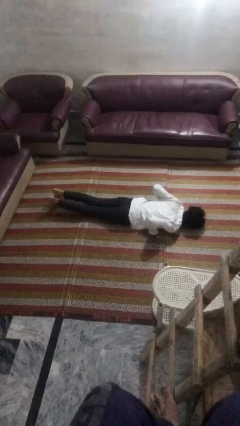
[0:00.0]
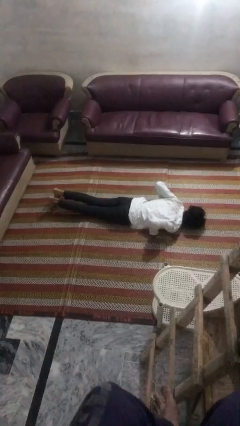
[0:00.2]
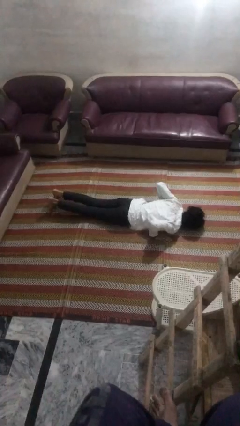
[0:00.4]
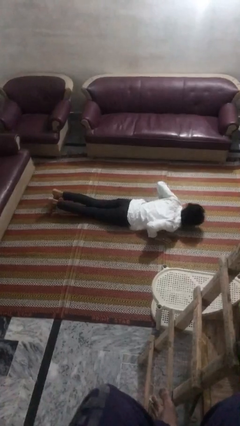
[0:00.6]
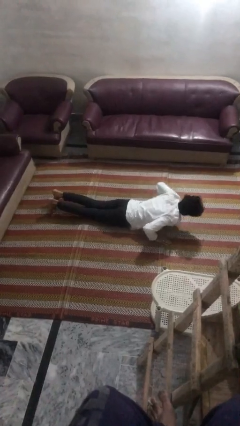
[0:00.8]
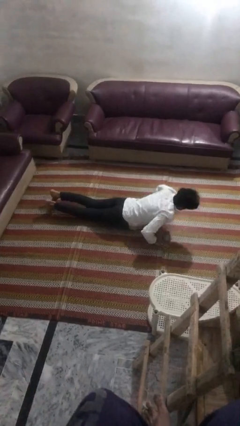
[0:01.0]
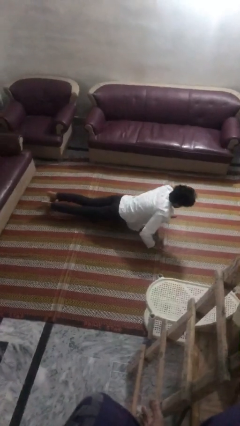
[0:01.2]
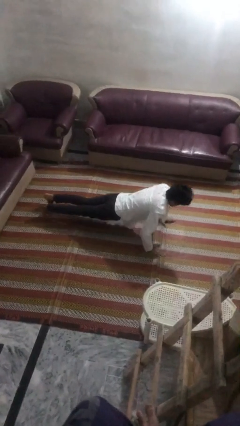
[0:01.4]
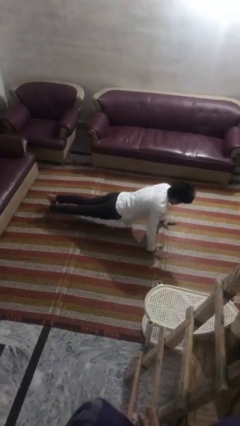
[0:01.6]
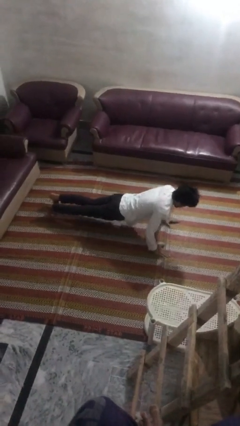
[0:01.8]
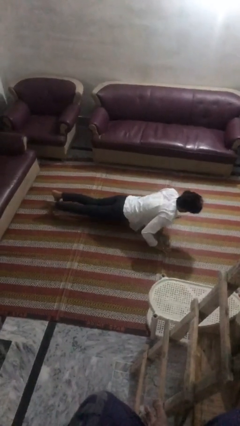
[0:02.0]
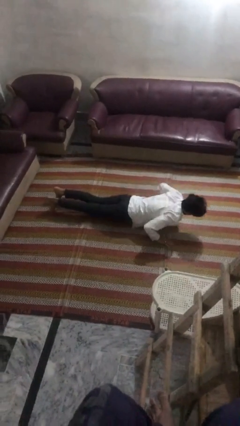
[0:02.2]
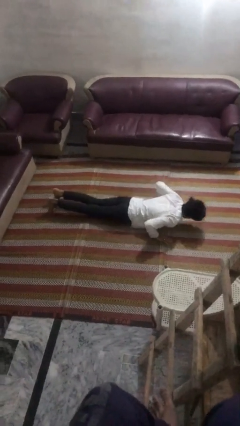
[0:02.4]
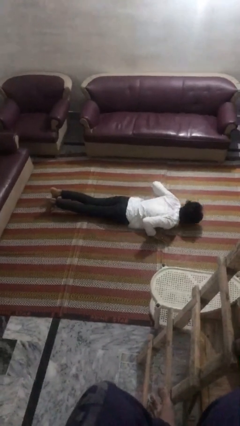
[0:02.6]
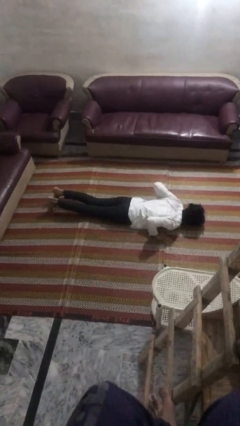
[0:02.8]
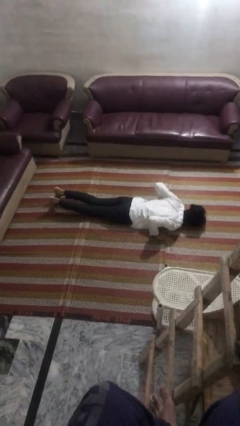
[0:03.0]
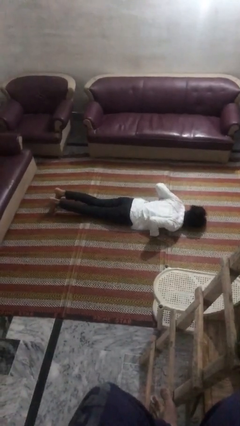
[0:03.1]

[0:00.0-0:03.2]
person exercises with pushup

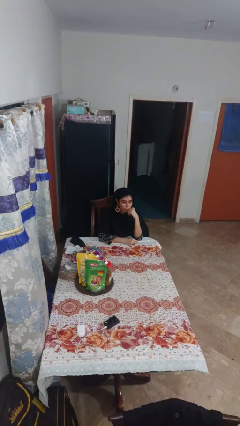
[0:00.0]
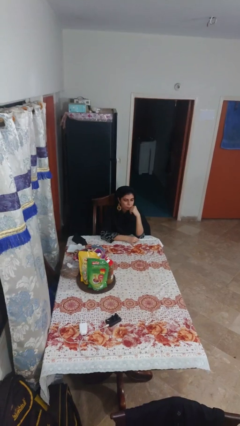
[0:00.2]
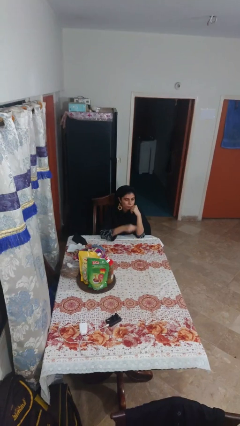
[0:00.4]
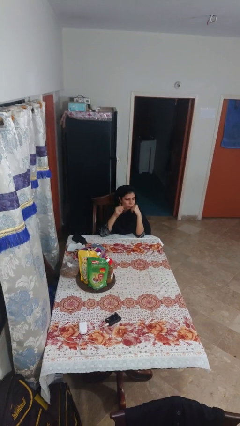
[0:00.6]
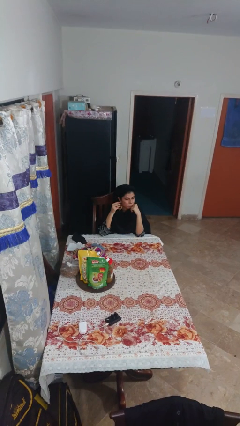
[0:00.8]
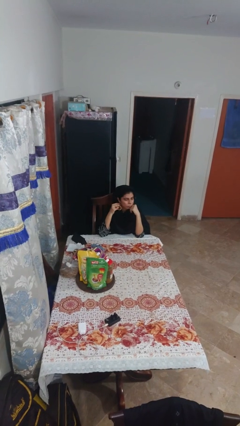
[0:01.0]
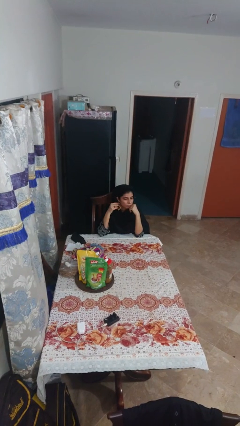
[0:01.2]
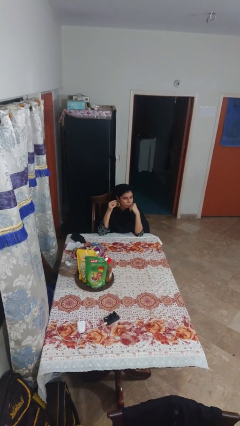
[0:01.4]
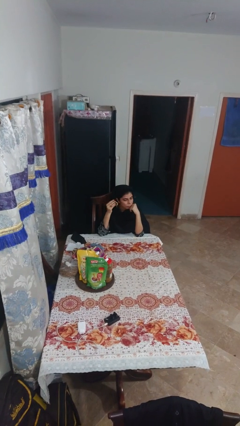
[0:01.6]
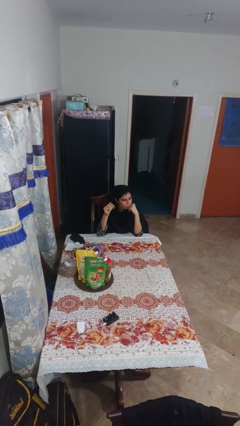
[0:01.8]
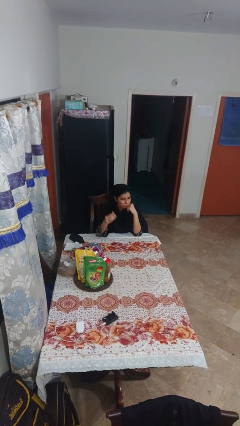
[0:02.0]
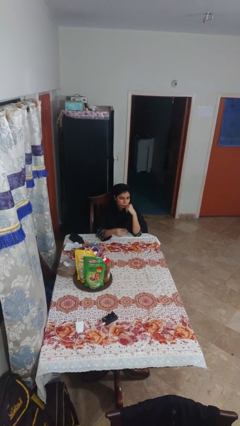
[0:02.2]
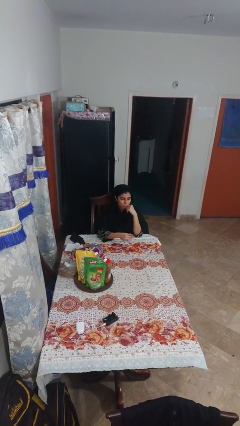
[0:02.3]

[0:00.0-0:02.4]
person takes off earrings

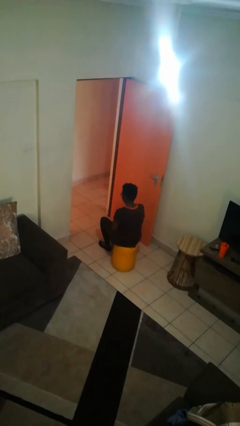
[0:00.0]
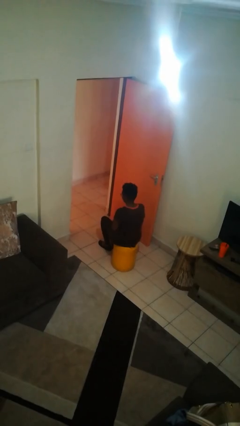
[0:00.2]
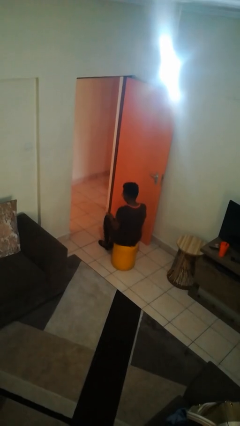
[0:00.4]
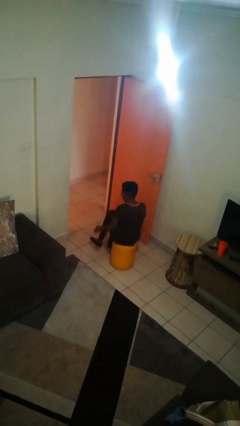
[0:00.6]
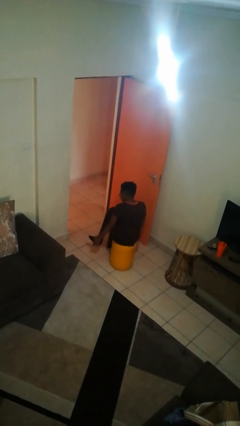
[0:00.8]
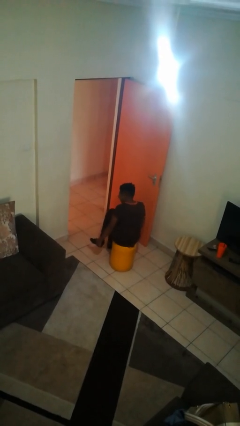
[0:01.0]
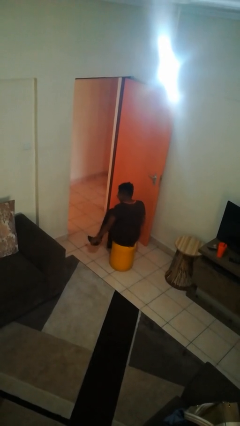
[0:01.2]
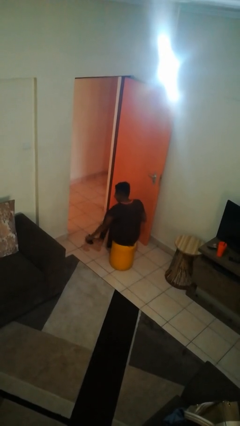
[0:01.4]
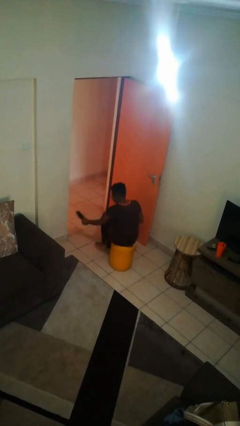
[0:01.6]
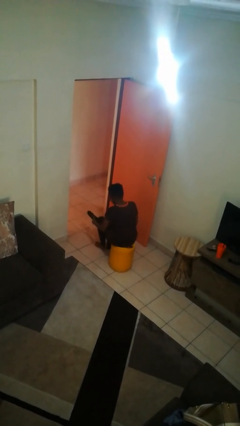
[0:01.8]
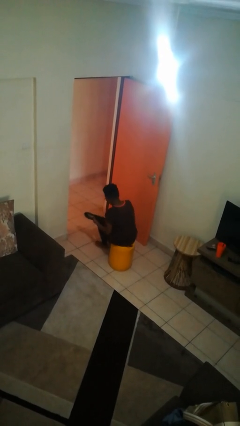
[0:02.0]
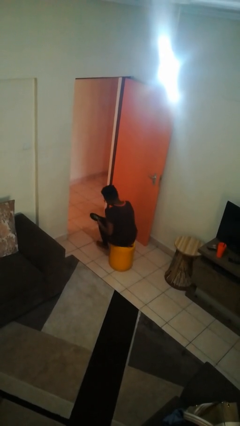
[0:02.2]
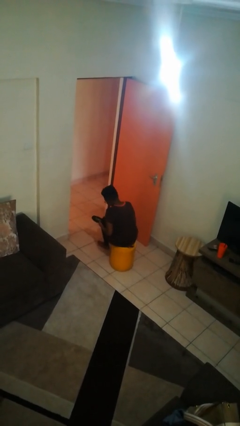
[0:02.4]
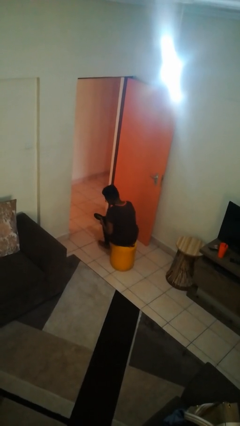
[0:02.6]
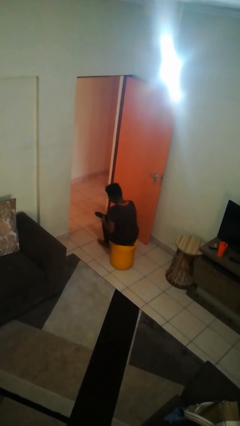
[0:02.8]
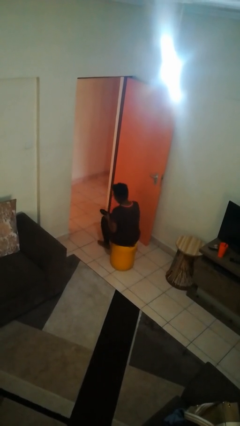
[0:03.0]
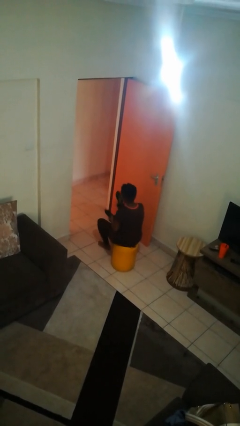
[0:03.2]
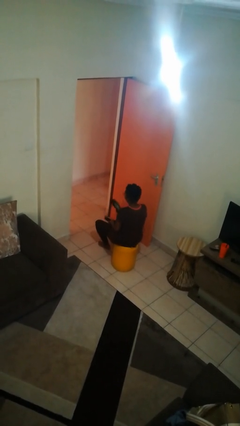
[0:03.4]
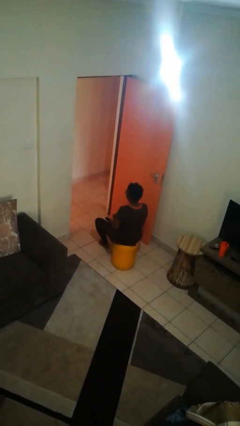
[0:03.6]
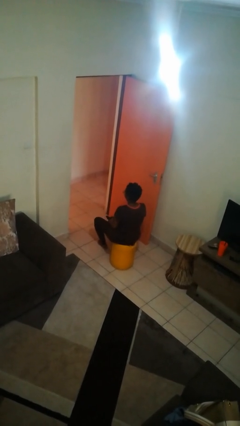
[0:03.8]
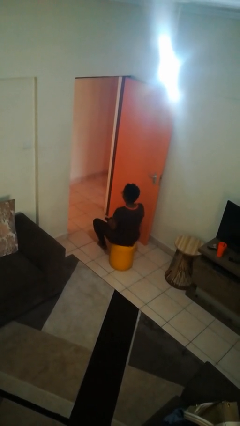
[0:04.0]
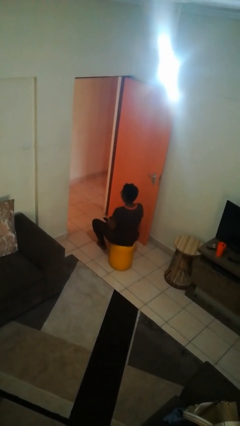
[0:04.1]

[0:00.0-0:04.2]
person takes off shoes

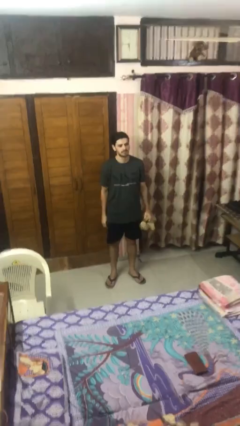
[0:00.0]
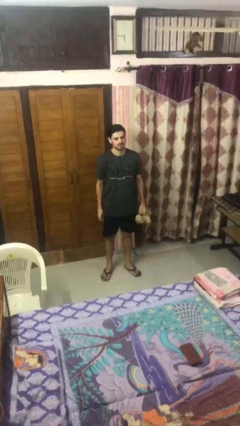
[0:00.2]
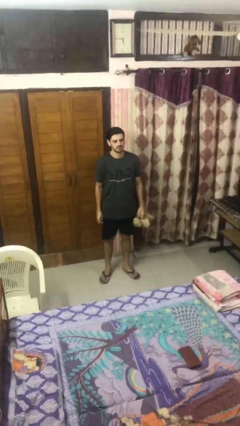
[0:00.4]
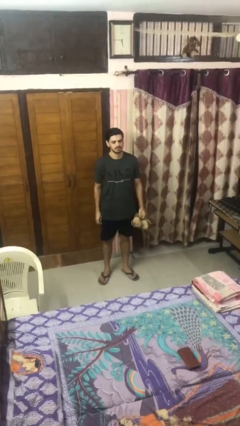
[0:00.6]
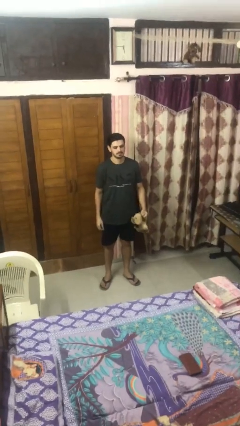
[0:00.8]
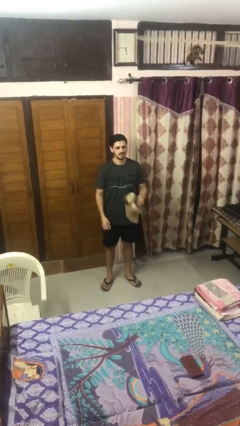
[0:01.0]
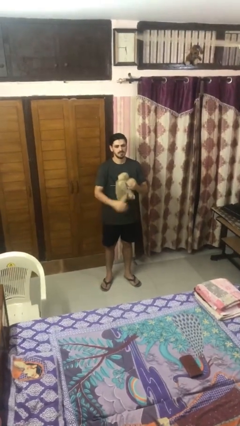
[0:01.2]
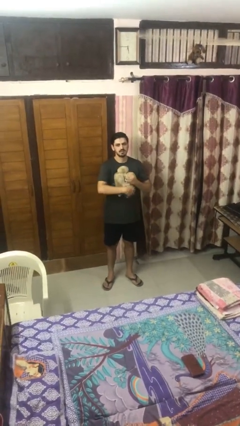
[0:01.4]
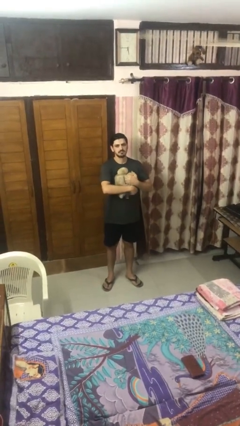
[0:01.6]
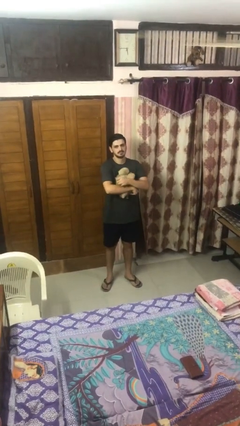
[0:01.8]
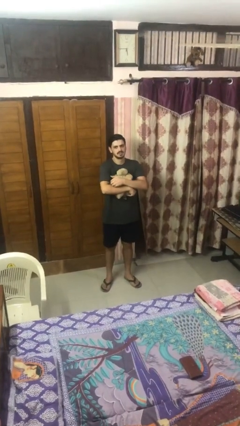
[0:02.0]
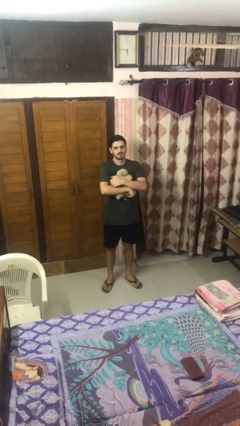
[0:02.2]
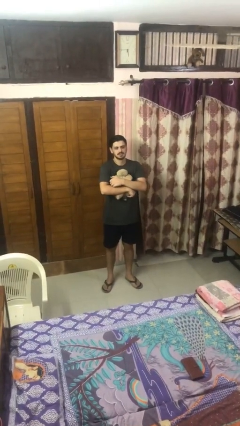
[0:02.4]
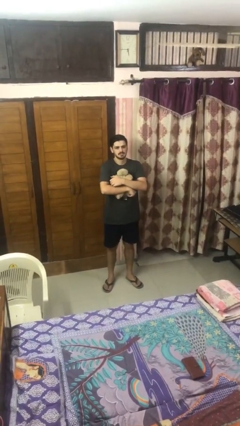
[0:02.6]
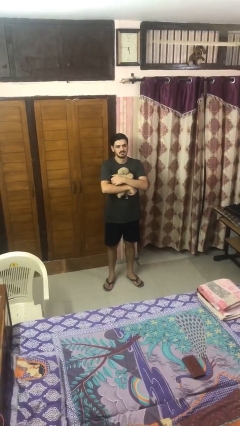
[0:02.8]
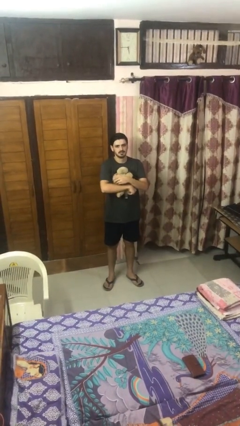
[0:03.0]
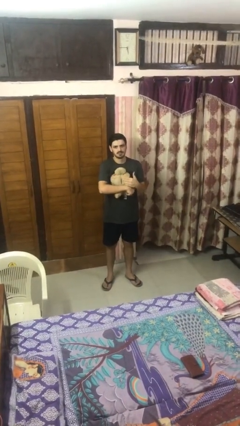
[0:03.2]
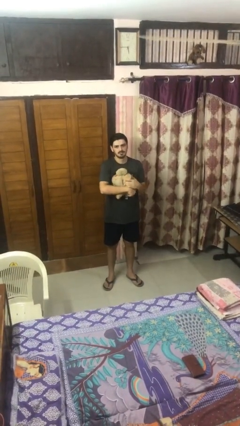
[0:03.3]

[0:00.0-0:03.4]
person hugs stuffed animal

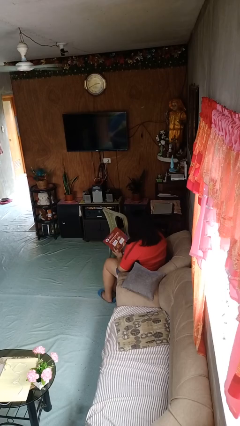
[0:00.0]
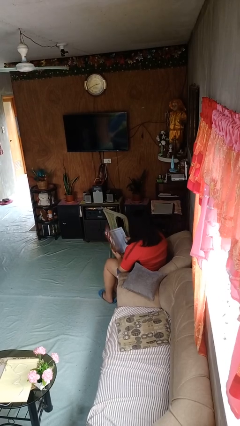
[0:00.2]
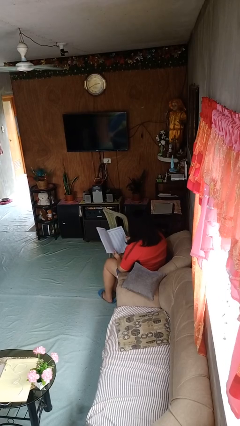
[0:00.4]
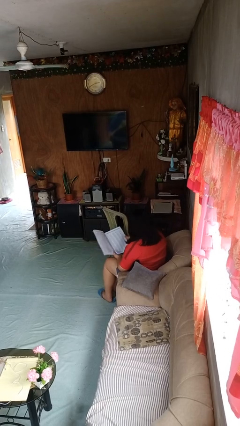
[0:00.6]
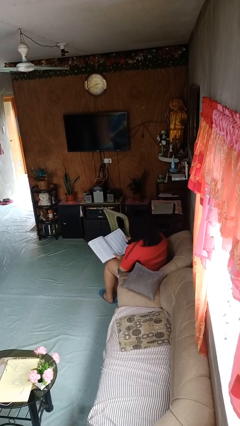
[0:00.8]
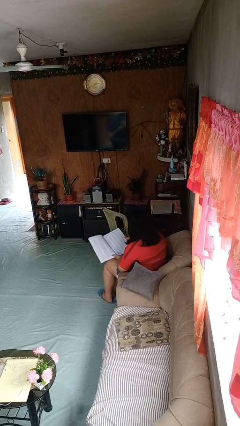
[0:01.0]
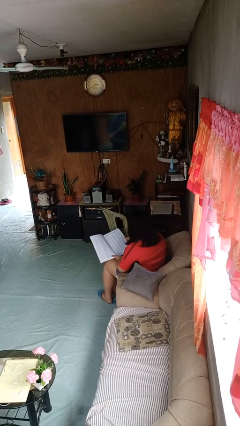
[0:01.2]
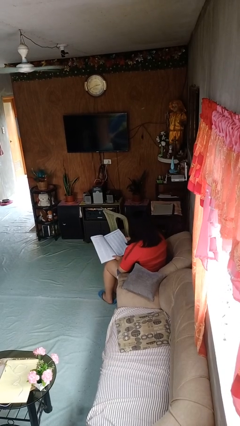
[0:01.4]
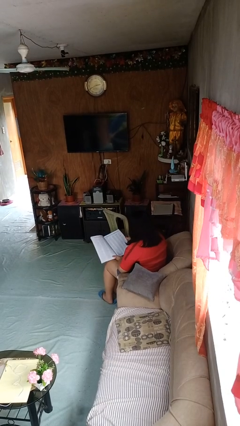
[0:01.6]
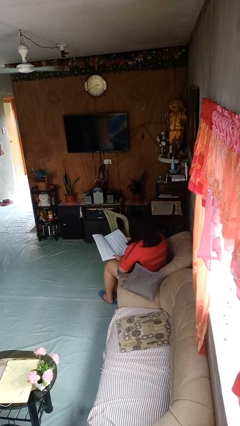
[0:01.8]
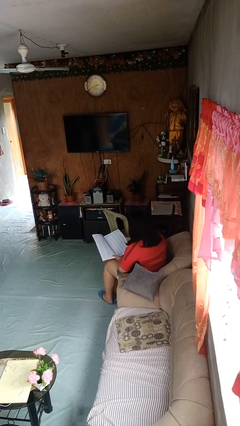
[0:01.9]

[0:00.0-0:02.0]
person reads magazine

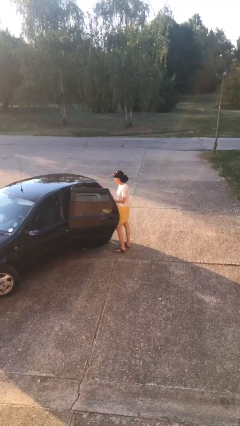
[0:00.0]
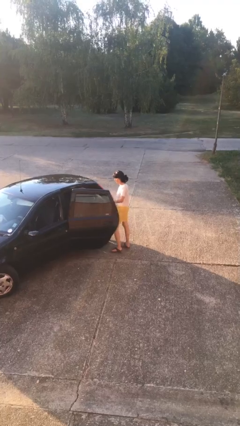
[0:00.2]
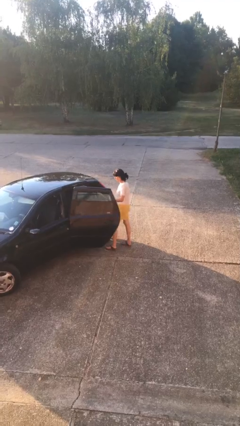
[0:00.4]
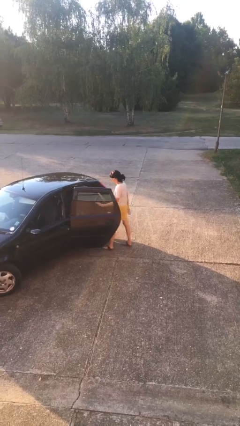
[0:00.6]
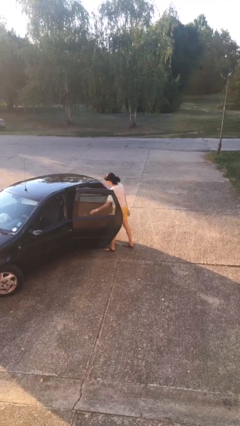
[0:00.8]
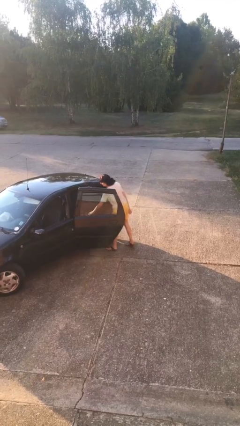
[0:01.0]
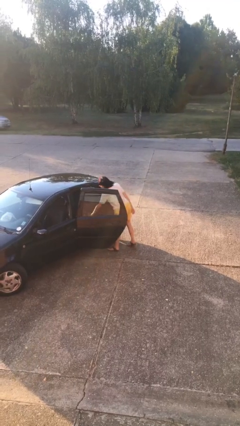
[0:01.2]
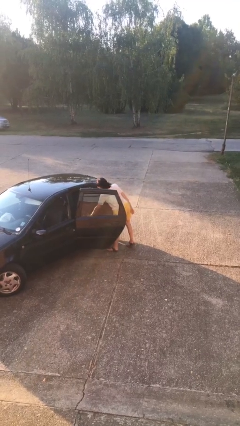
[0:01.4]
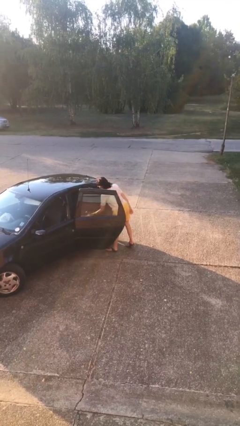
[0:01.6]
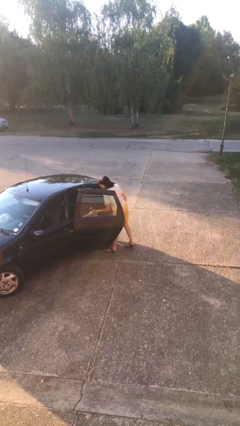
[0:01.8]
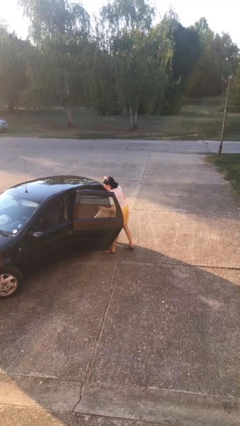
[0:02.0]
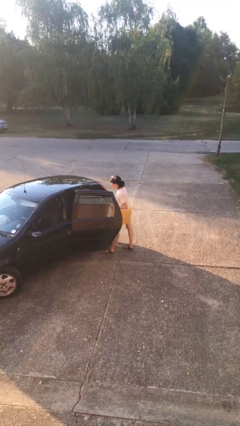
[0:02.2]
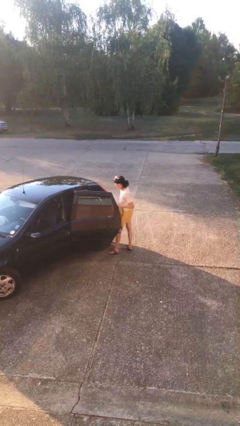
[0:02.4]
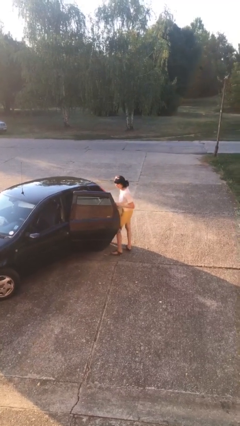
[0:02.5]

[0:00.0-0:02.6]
person unloads car
